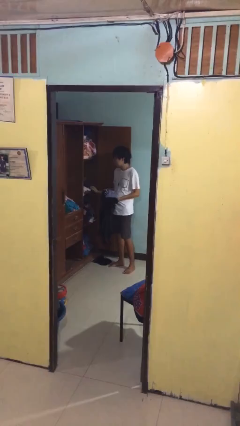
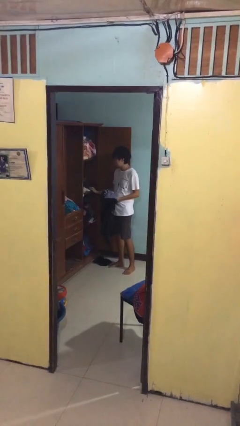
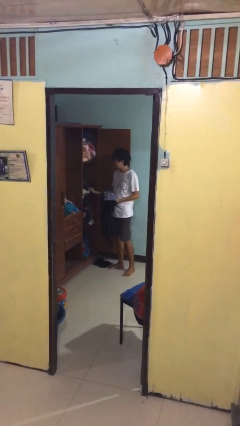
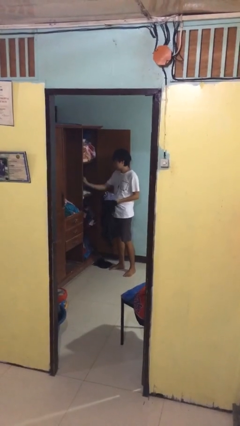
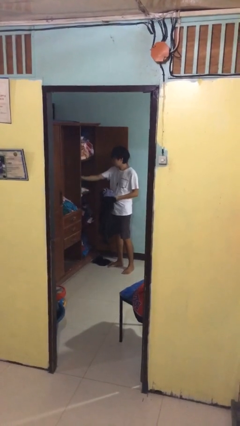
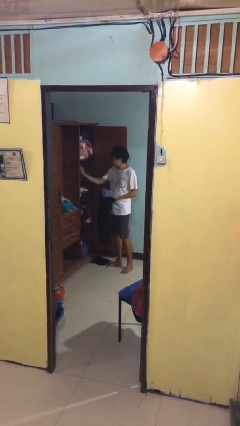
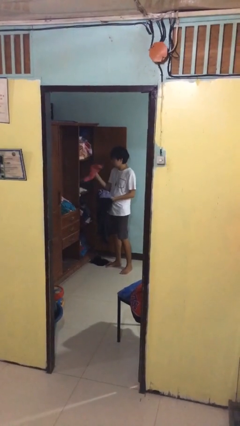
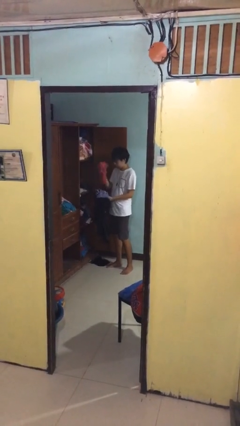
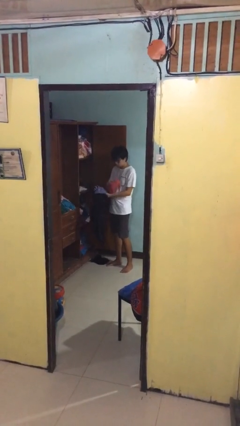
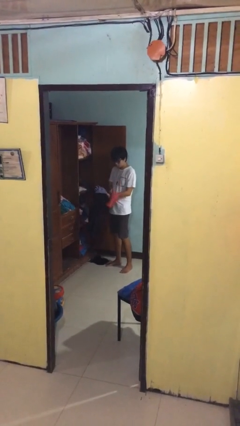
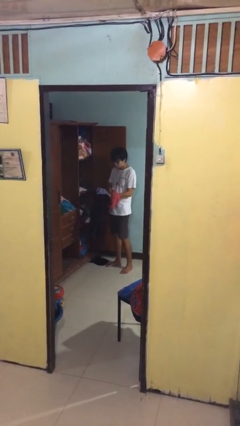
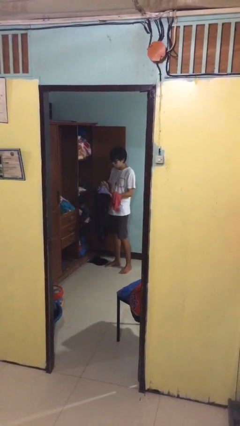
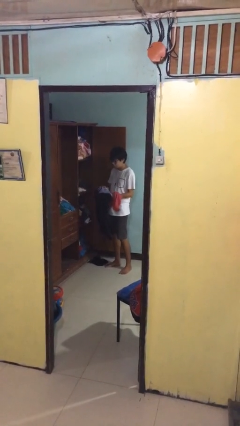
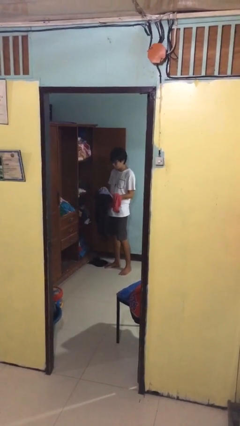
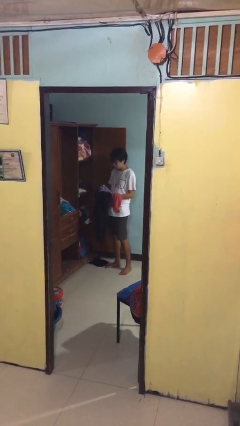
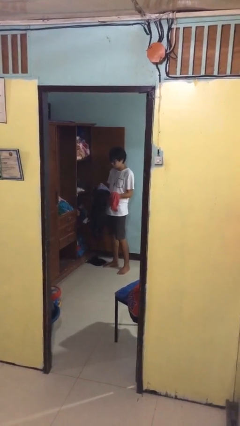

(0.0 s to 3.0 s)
person takes clothes from dresser

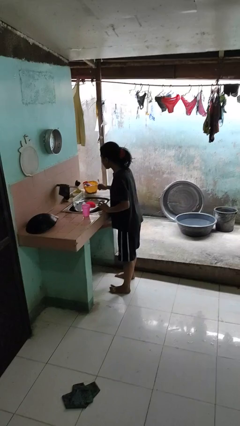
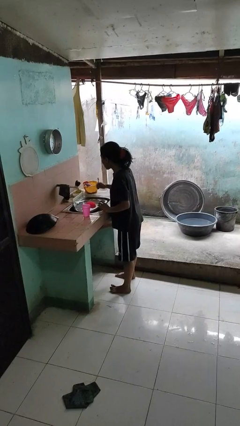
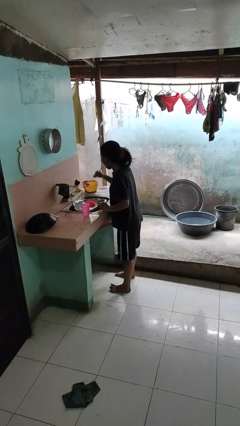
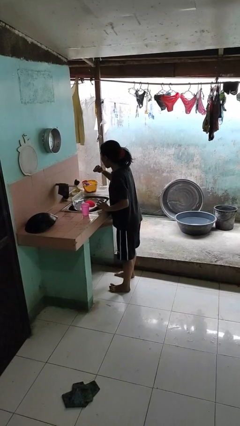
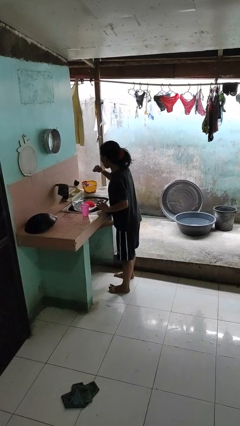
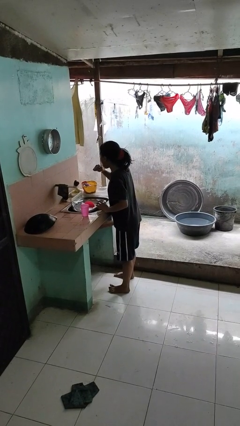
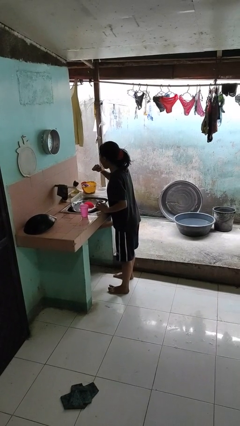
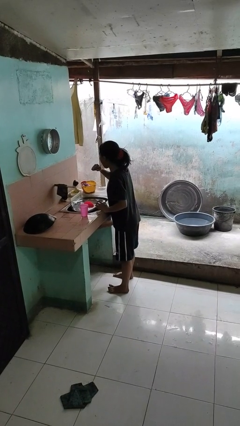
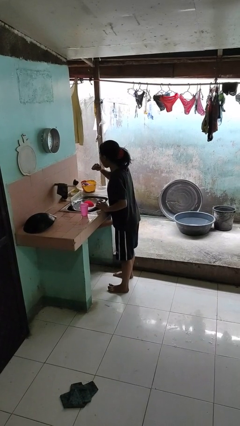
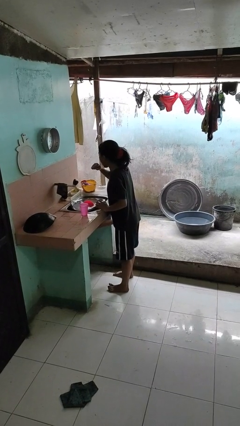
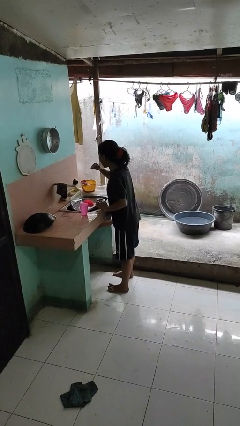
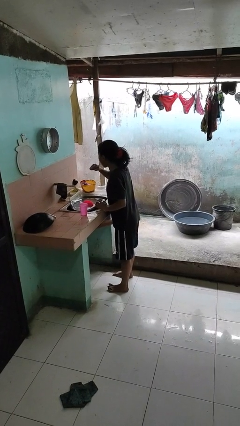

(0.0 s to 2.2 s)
person brushes teeth

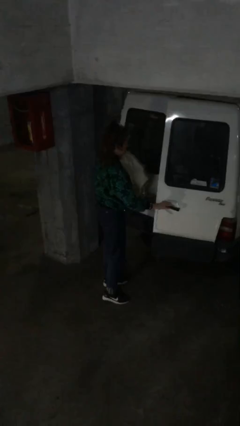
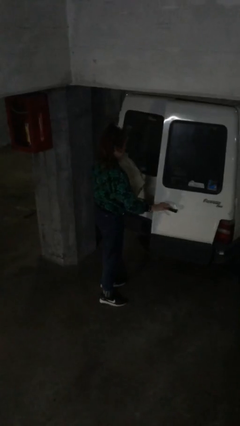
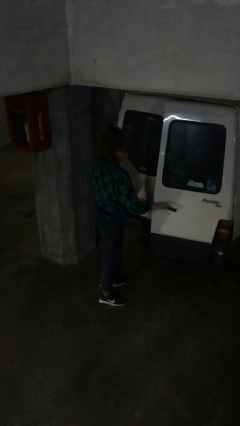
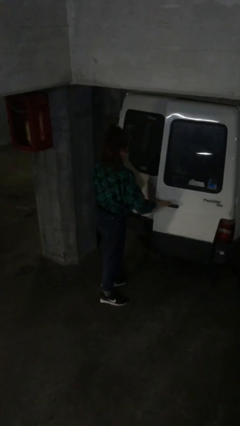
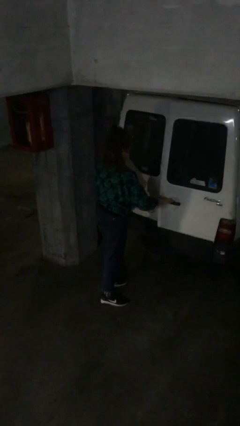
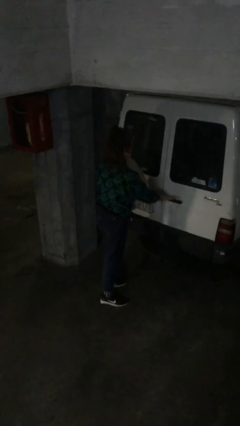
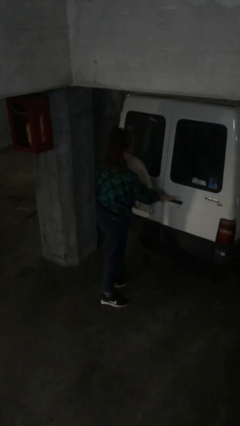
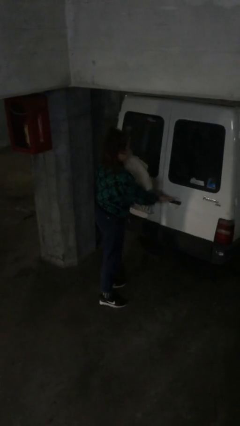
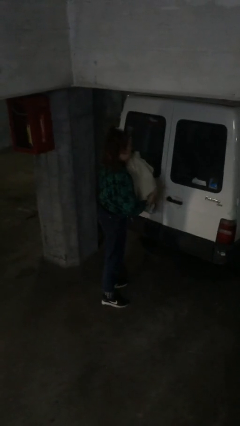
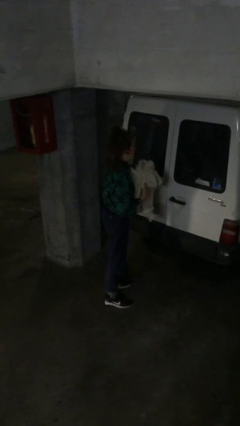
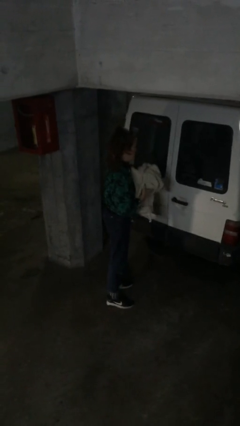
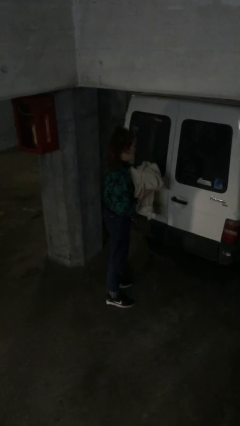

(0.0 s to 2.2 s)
person closes car door

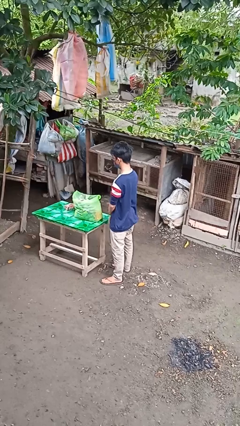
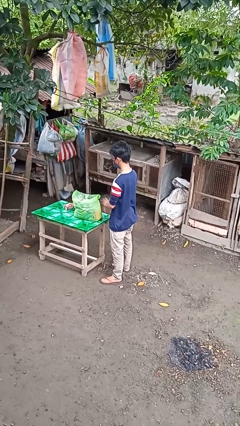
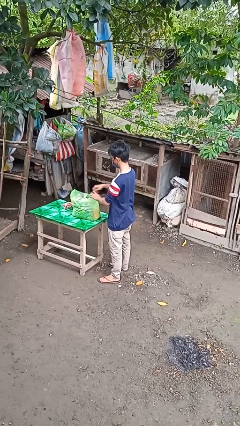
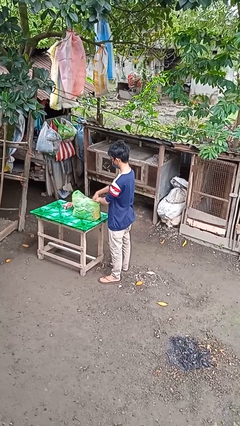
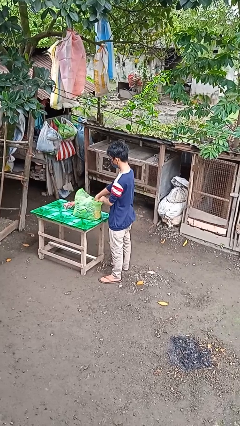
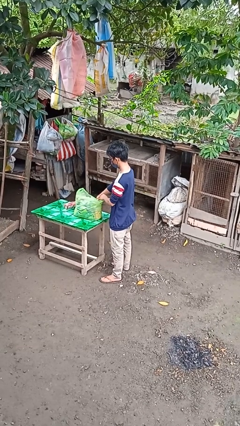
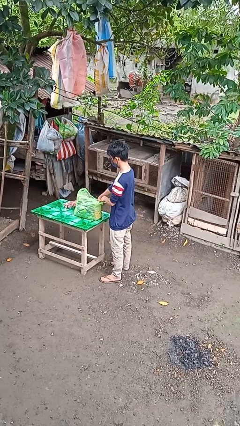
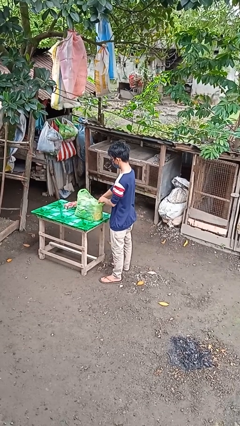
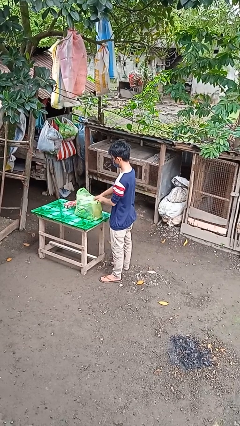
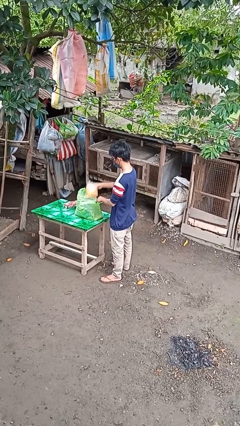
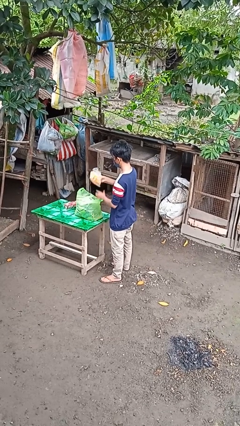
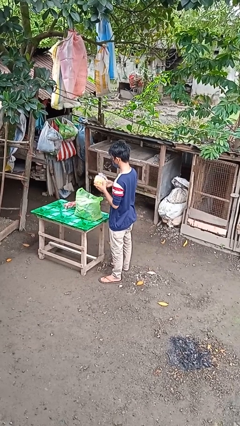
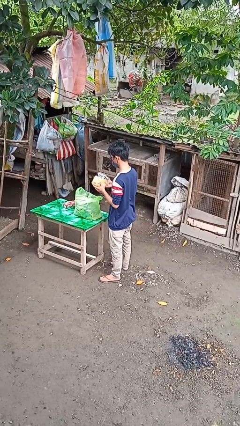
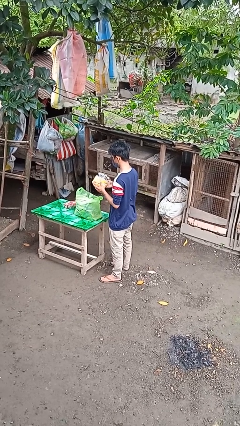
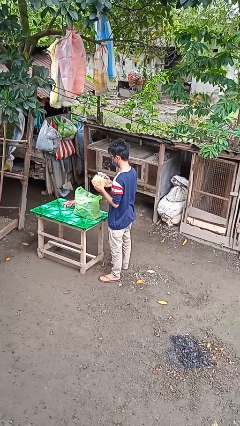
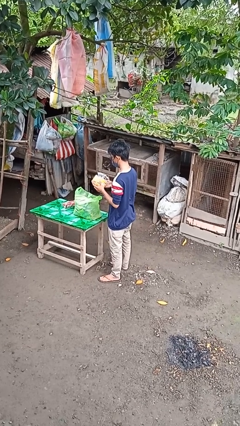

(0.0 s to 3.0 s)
person takes object from bag

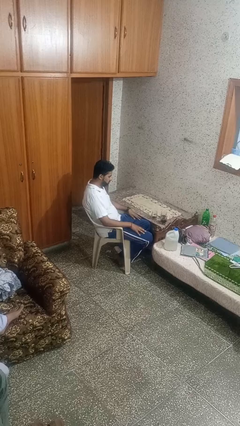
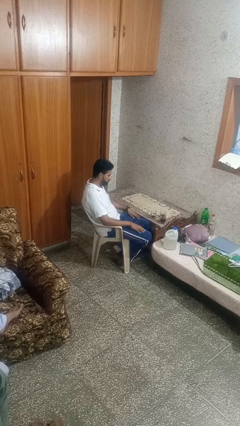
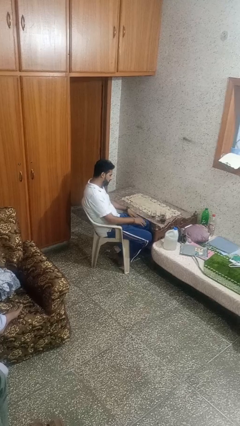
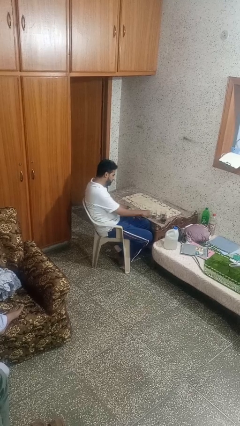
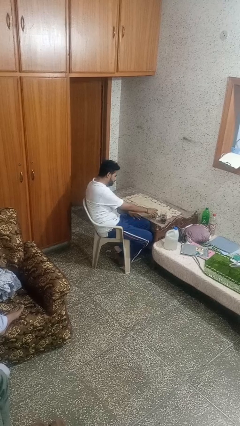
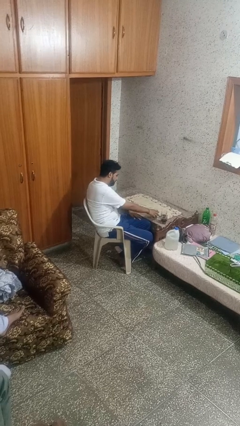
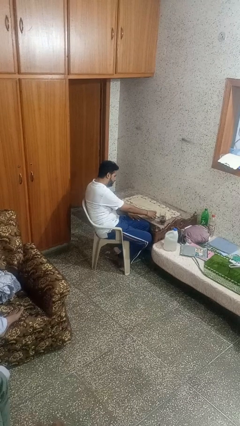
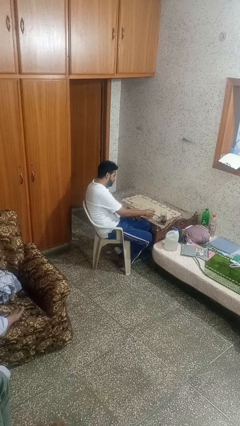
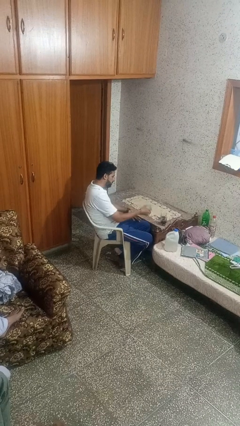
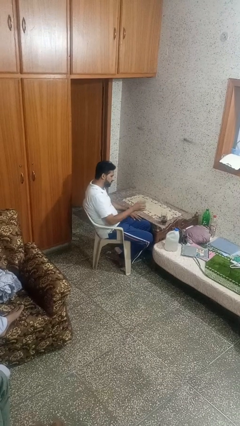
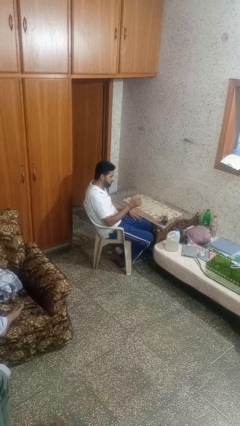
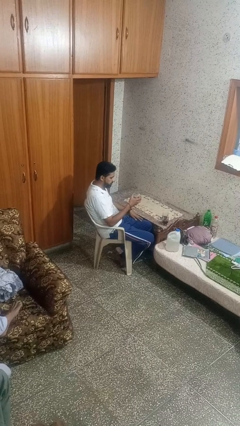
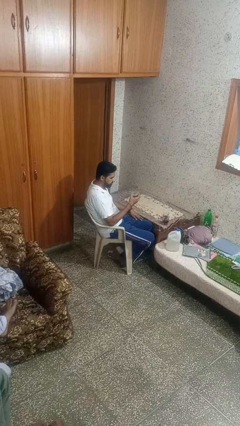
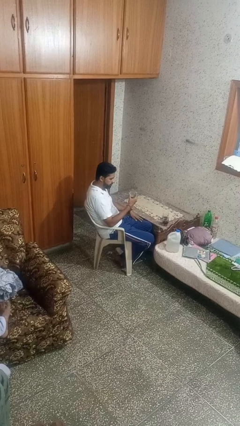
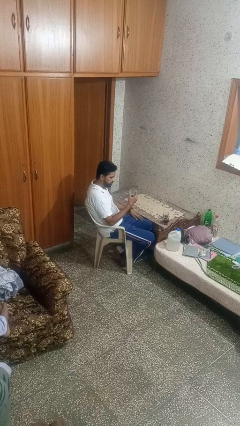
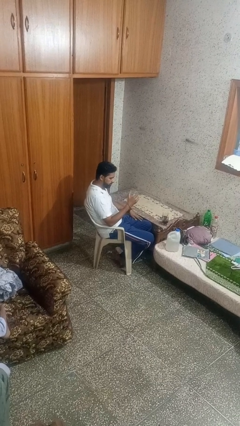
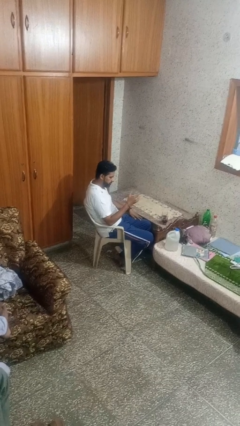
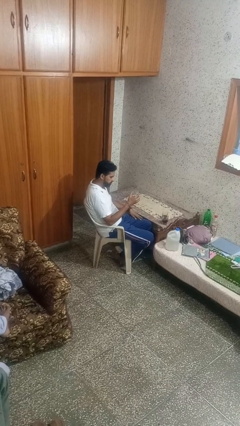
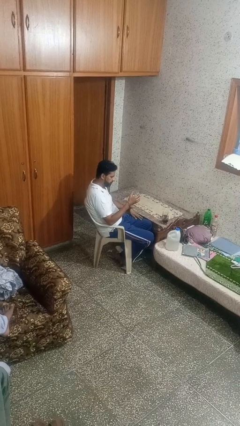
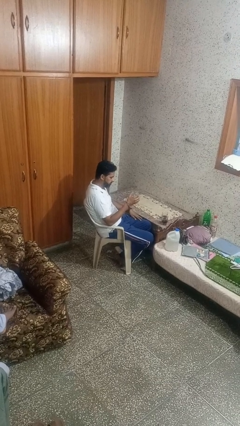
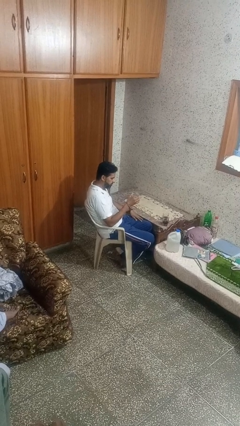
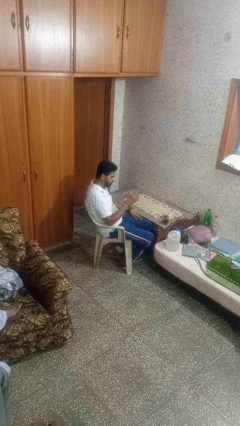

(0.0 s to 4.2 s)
person picks up object from table

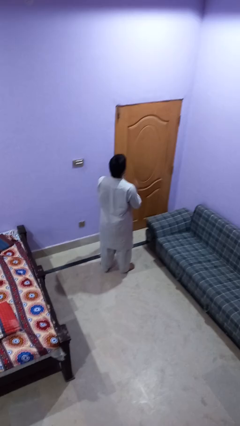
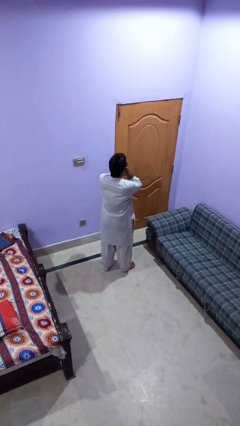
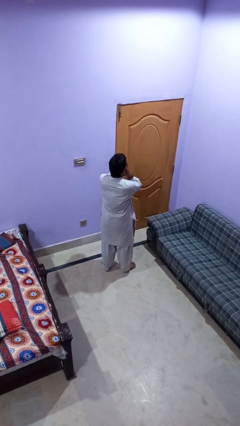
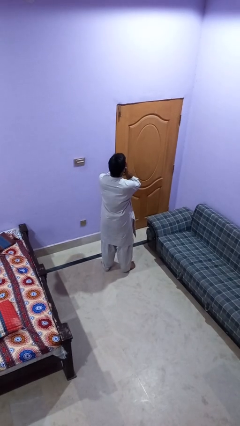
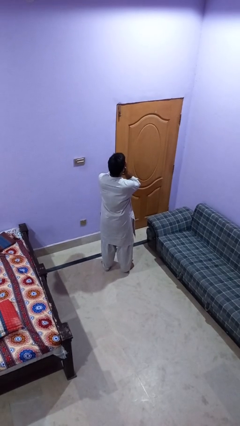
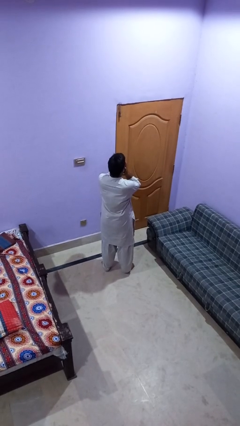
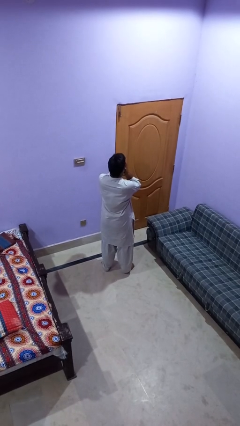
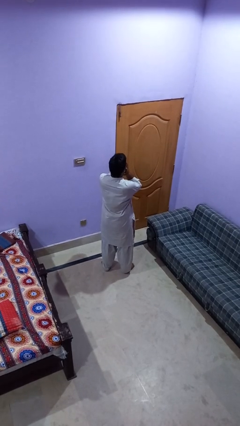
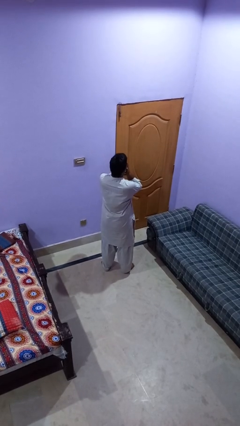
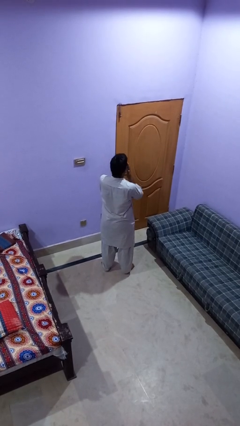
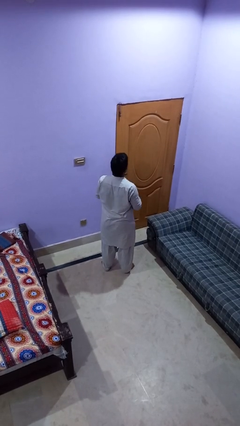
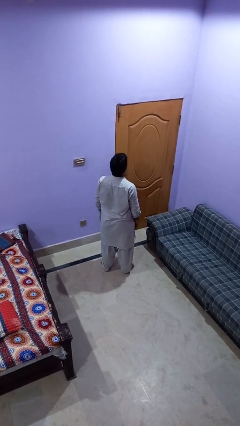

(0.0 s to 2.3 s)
person covers face with hands
